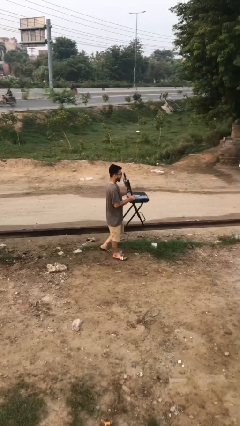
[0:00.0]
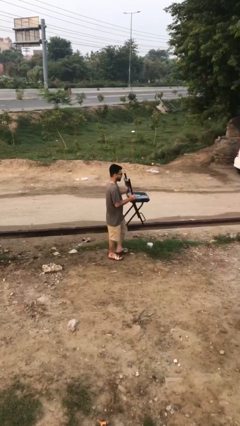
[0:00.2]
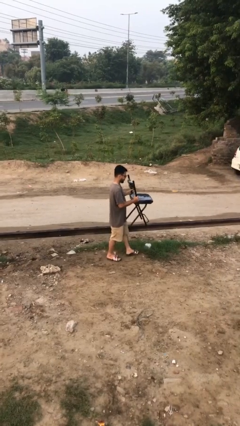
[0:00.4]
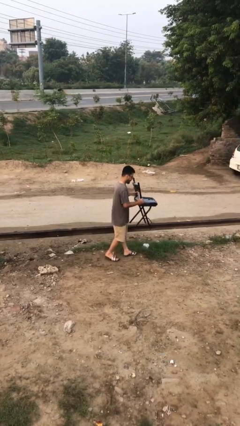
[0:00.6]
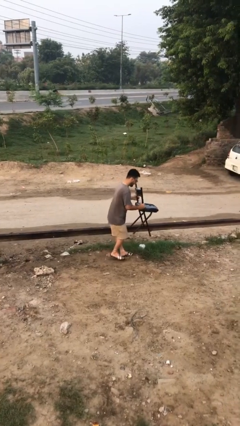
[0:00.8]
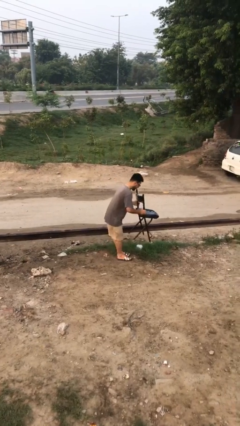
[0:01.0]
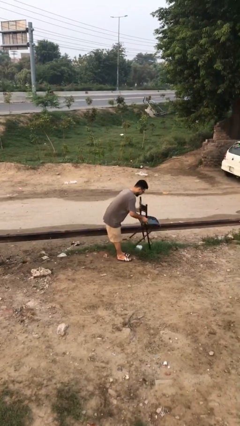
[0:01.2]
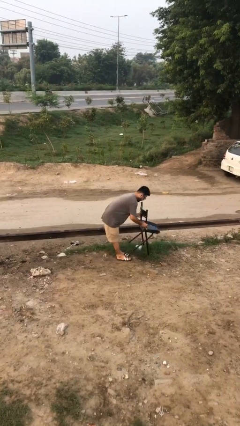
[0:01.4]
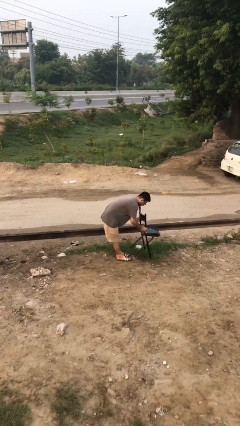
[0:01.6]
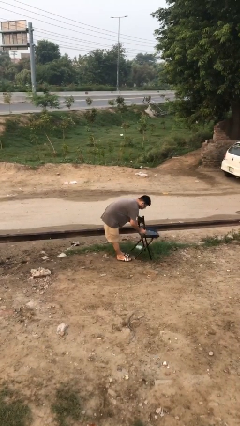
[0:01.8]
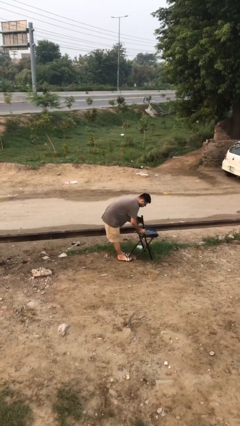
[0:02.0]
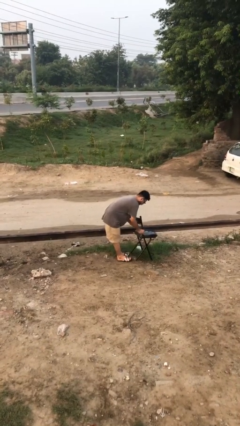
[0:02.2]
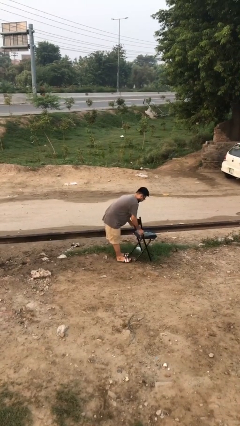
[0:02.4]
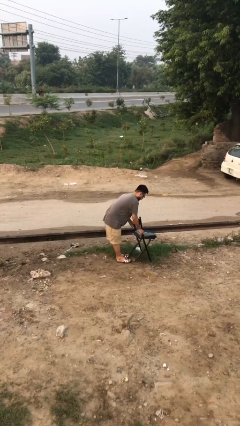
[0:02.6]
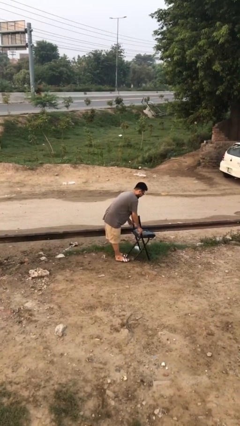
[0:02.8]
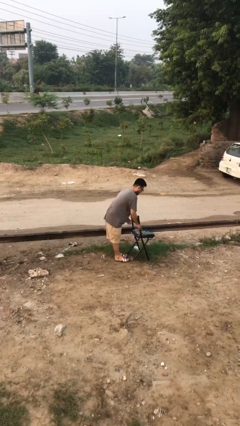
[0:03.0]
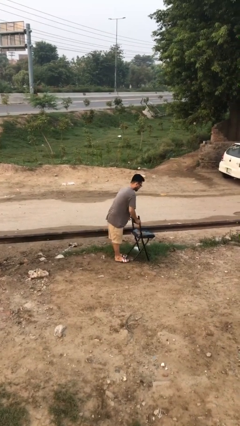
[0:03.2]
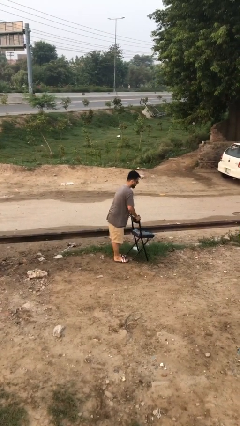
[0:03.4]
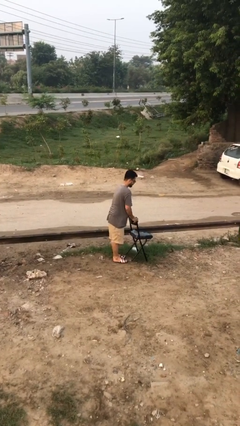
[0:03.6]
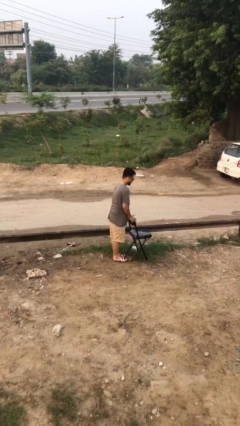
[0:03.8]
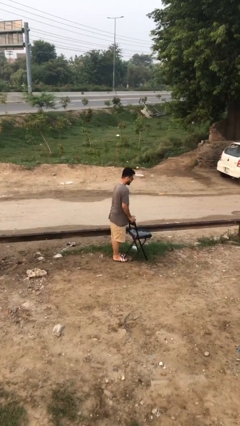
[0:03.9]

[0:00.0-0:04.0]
person puts down object on floor

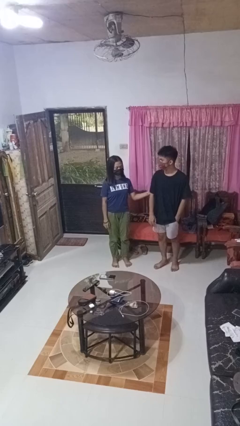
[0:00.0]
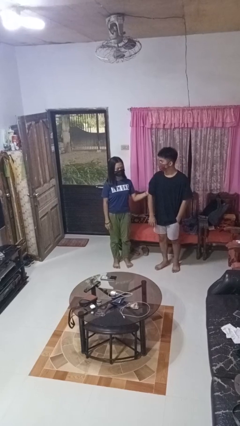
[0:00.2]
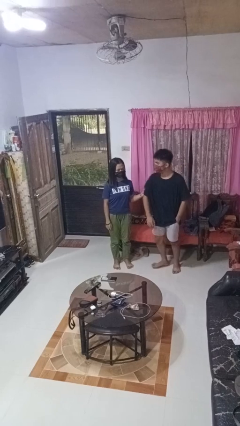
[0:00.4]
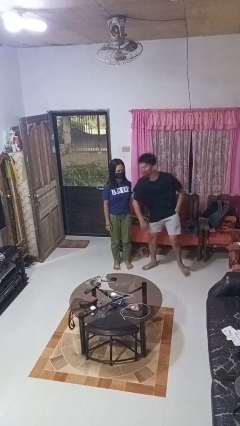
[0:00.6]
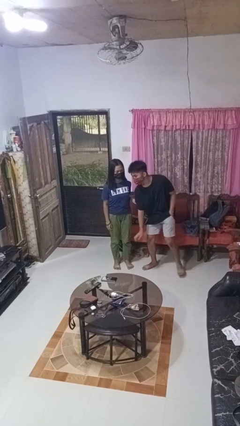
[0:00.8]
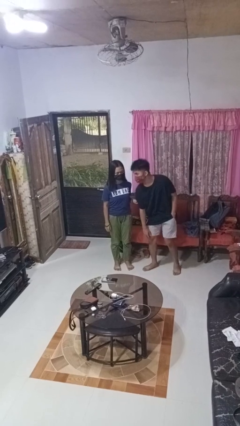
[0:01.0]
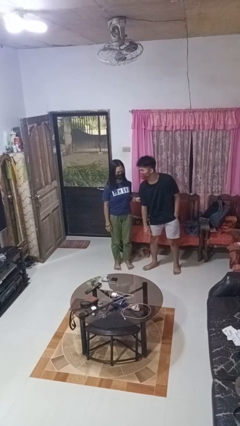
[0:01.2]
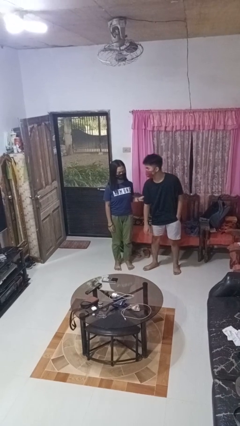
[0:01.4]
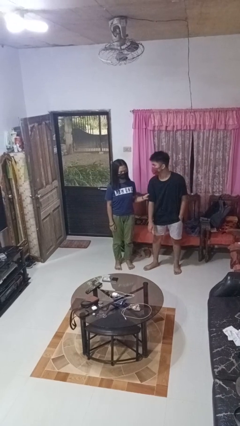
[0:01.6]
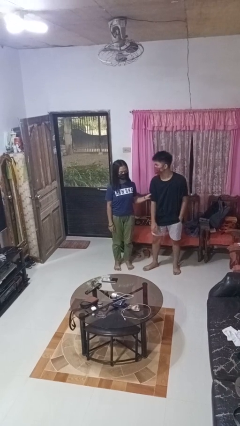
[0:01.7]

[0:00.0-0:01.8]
person grabs person by bicep

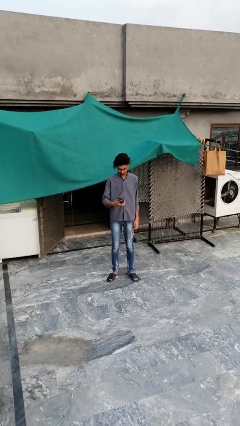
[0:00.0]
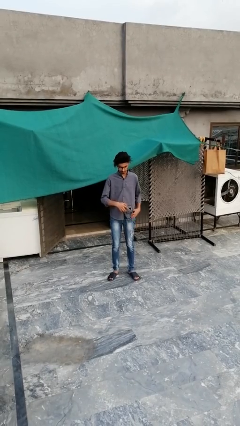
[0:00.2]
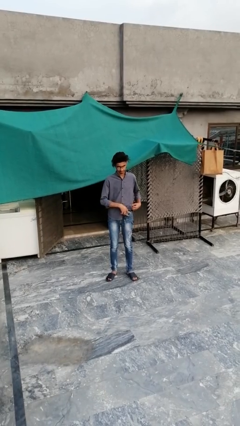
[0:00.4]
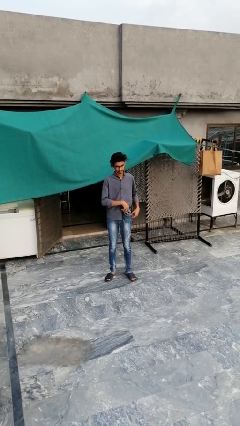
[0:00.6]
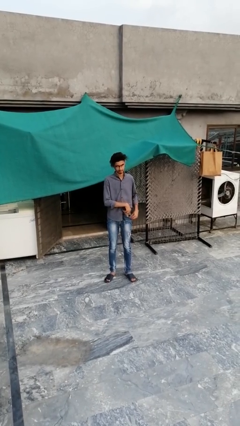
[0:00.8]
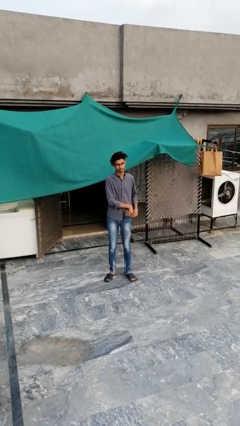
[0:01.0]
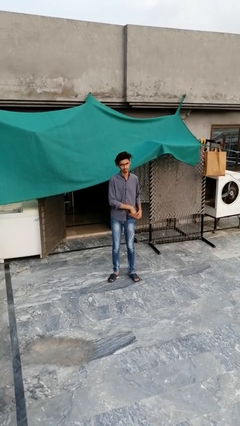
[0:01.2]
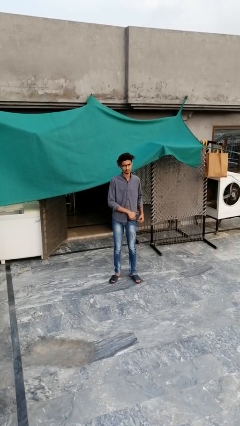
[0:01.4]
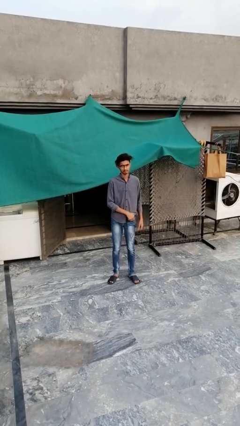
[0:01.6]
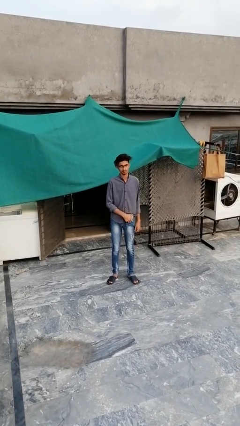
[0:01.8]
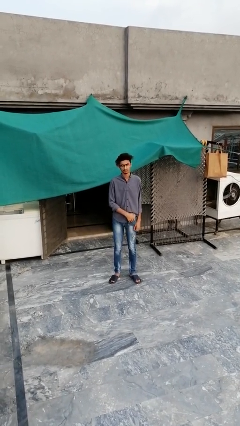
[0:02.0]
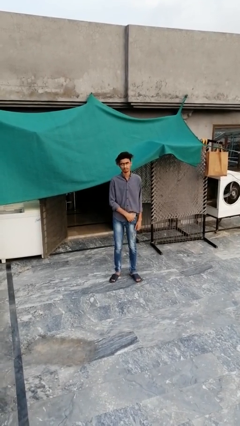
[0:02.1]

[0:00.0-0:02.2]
person puts phone into pocket

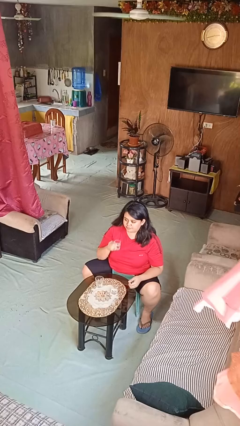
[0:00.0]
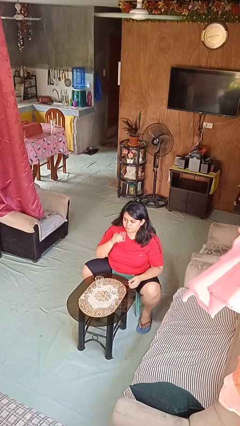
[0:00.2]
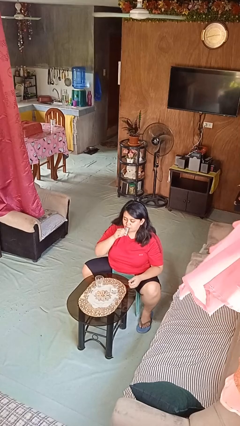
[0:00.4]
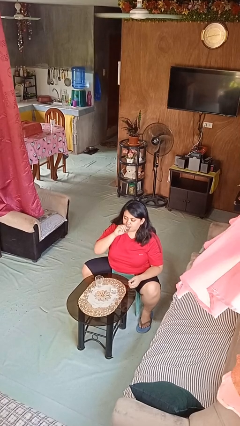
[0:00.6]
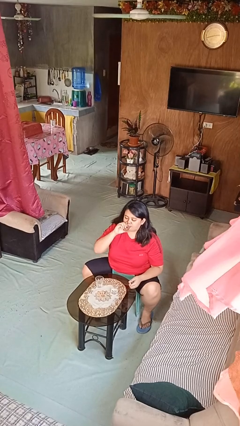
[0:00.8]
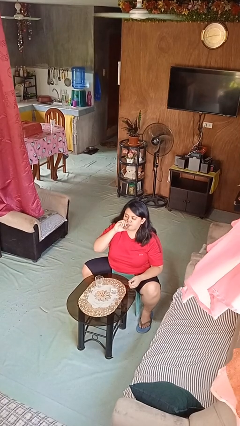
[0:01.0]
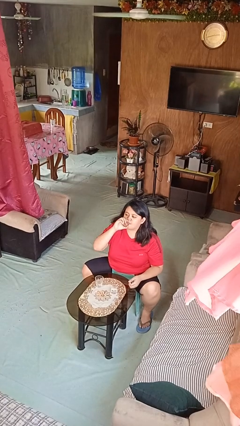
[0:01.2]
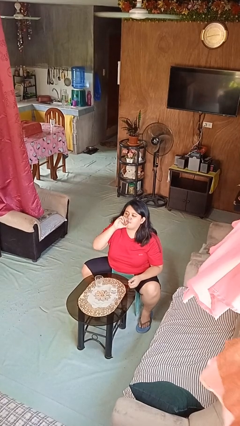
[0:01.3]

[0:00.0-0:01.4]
person drinks from shotglass

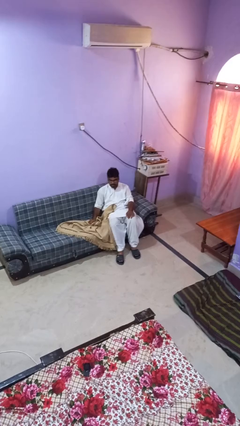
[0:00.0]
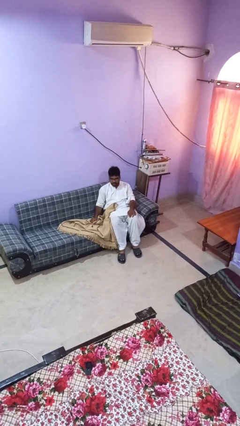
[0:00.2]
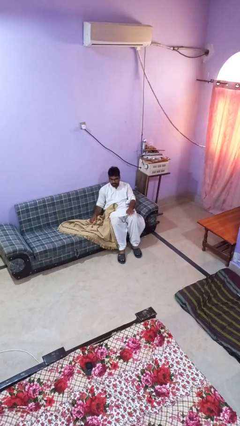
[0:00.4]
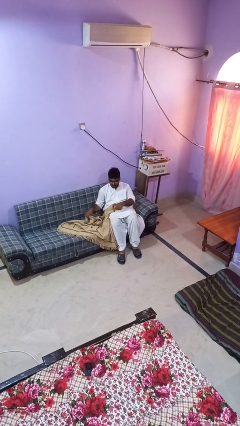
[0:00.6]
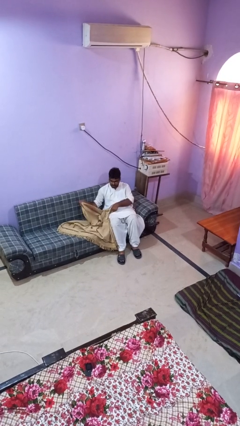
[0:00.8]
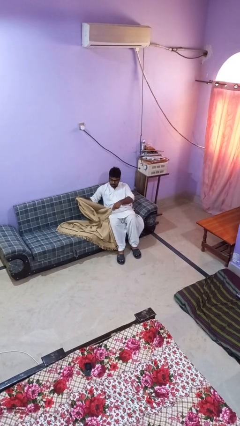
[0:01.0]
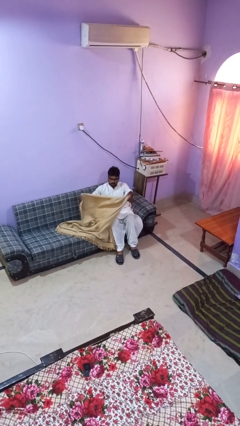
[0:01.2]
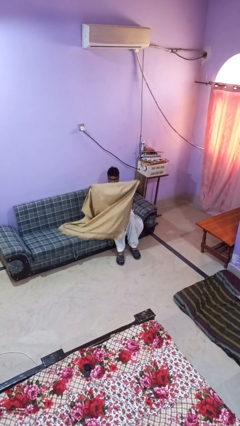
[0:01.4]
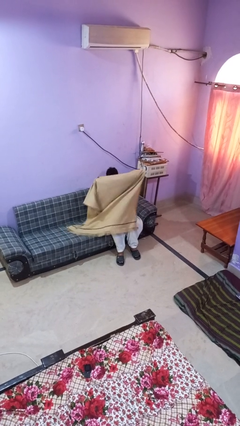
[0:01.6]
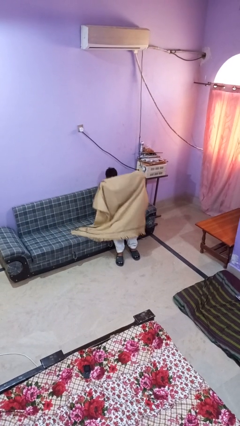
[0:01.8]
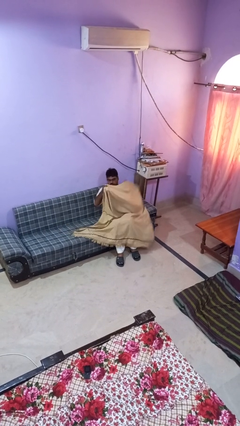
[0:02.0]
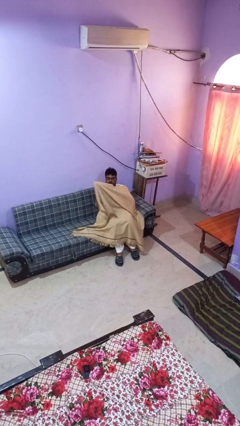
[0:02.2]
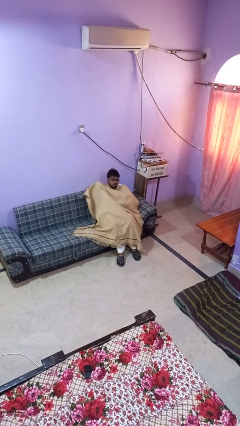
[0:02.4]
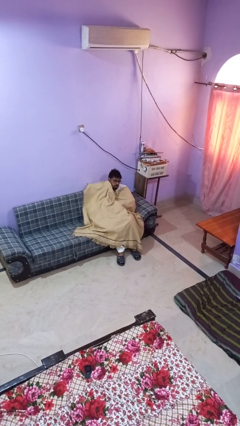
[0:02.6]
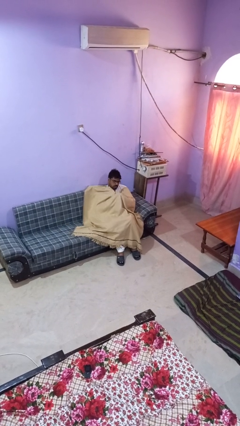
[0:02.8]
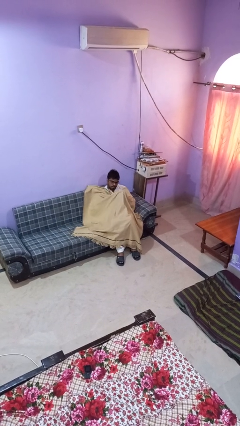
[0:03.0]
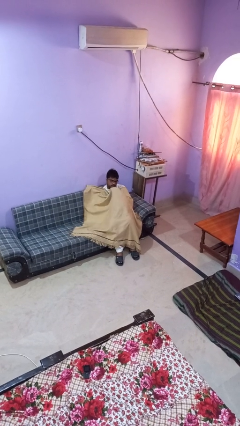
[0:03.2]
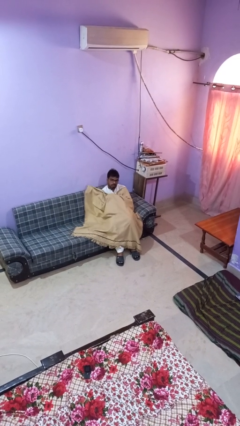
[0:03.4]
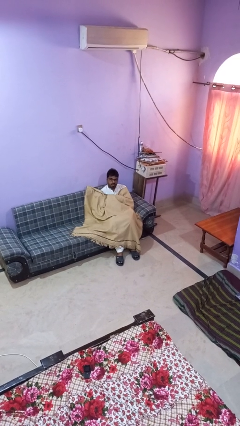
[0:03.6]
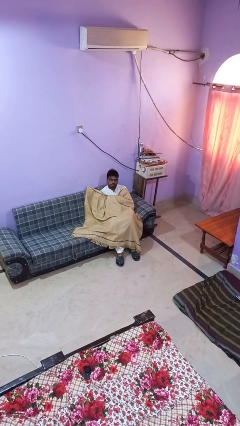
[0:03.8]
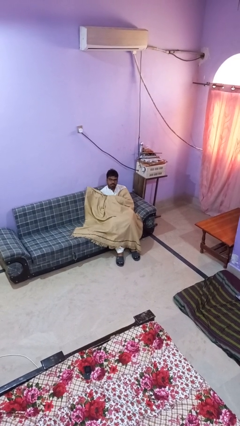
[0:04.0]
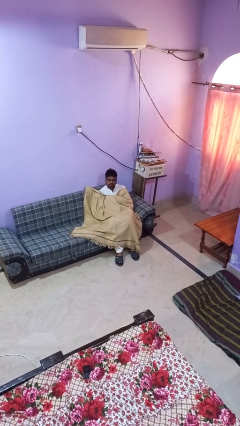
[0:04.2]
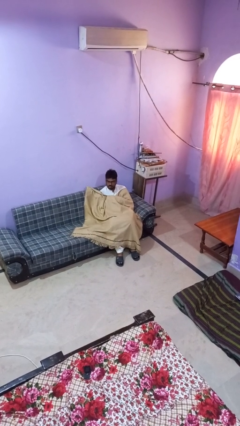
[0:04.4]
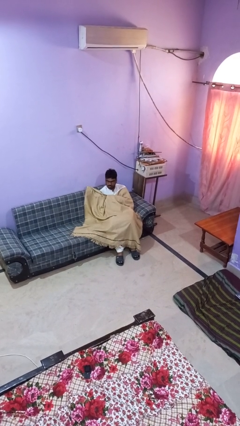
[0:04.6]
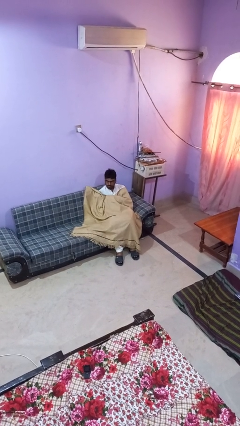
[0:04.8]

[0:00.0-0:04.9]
person covers with blanket

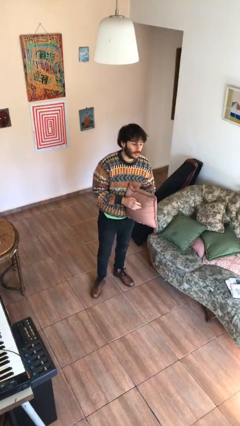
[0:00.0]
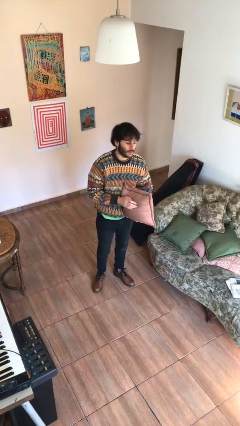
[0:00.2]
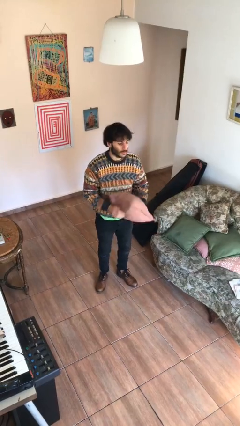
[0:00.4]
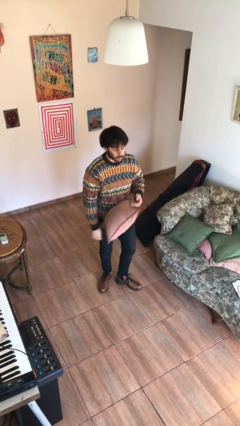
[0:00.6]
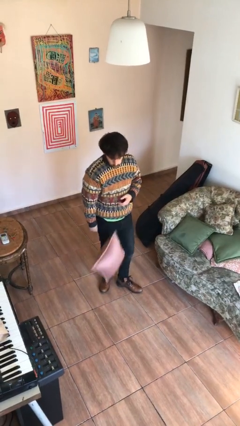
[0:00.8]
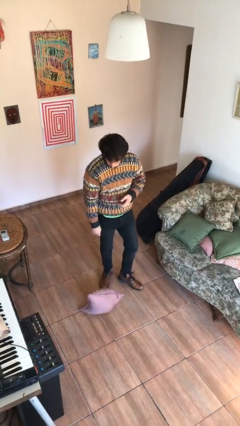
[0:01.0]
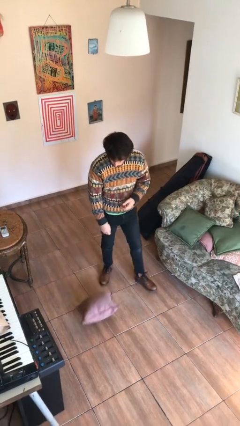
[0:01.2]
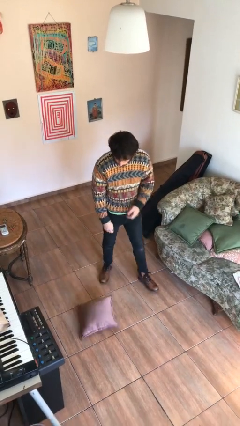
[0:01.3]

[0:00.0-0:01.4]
person drops object

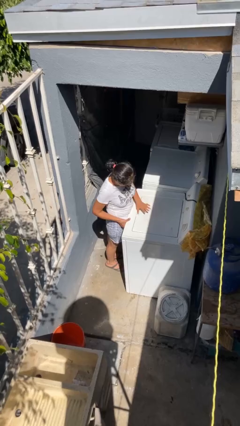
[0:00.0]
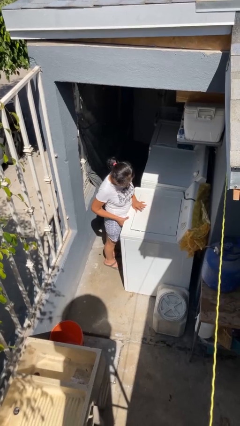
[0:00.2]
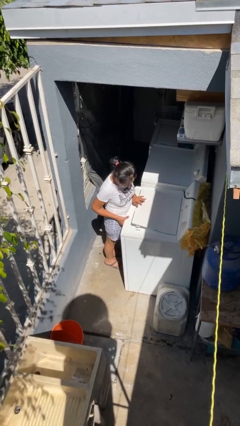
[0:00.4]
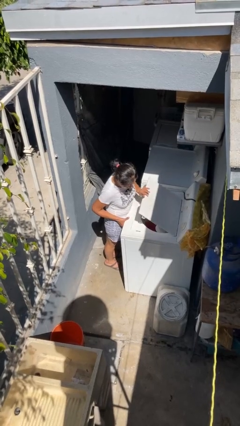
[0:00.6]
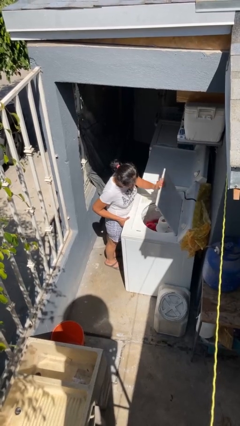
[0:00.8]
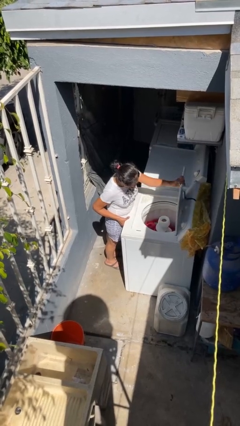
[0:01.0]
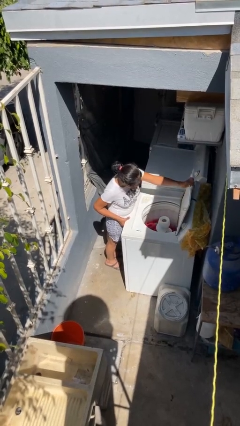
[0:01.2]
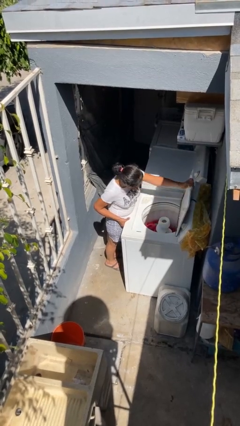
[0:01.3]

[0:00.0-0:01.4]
person opens clothes washer
